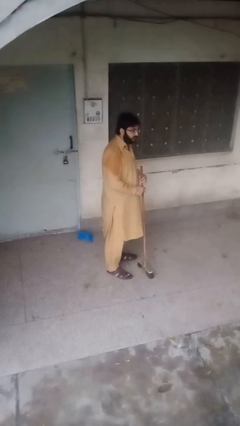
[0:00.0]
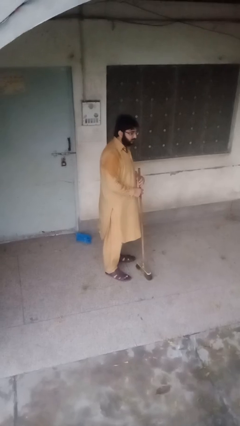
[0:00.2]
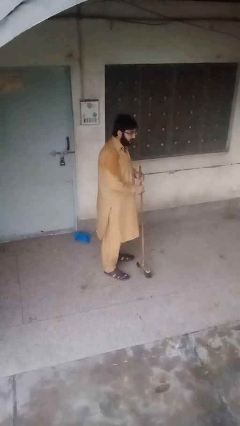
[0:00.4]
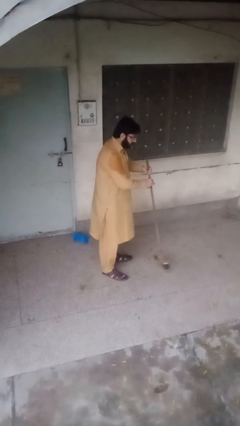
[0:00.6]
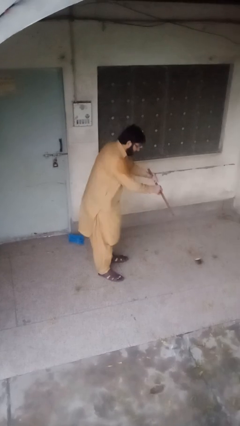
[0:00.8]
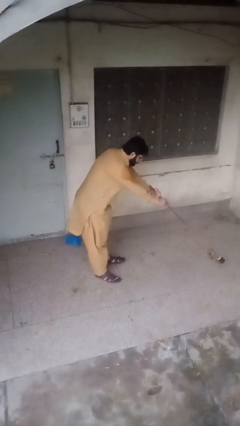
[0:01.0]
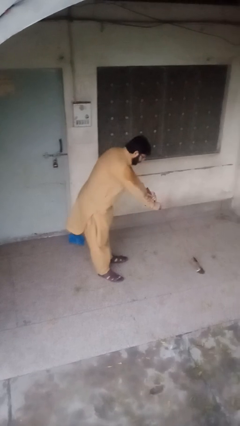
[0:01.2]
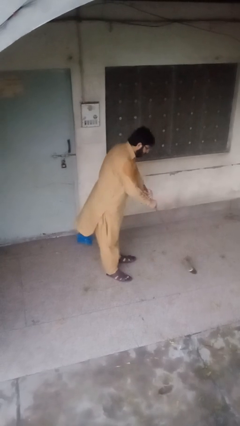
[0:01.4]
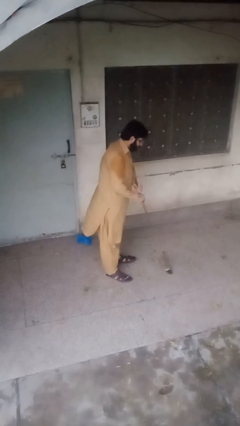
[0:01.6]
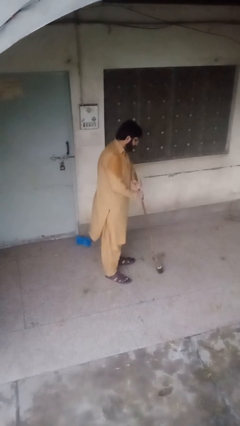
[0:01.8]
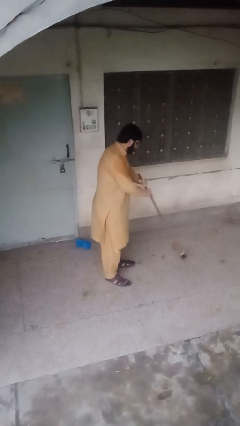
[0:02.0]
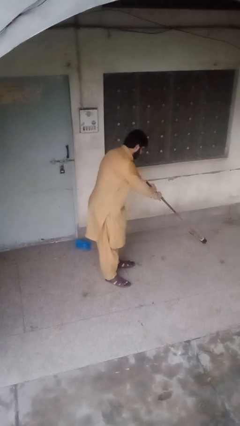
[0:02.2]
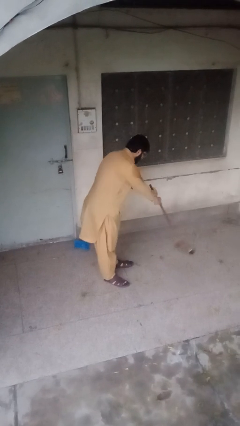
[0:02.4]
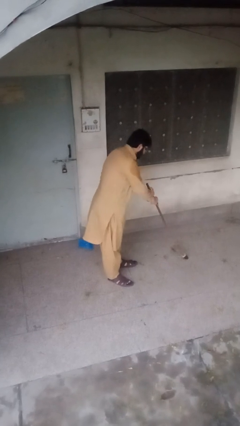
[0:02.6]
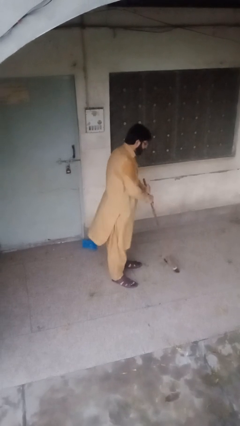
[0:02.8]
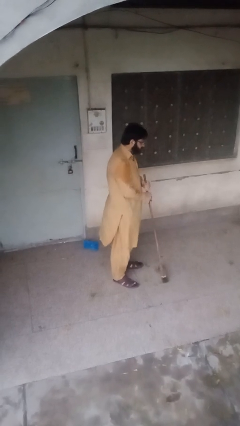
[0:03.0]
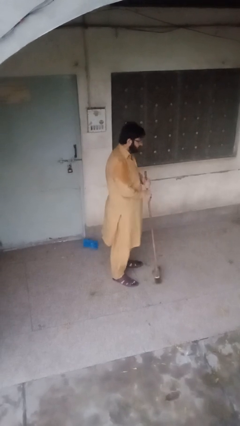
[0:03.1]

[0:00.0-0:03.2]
person sweeps floor

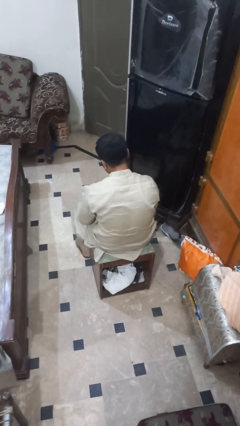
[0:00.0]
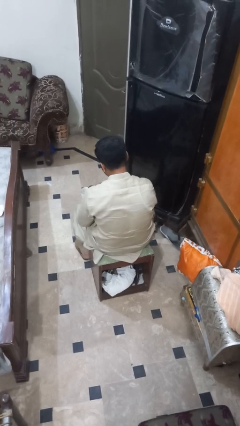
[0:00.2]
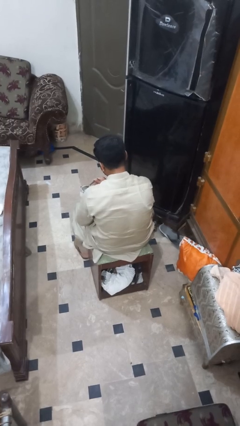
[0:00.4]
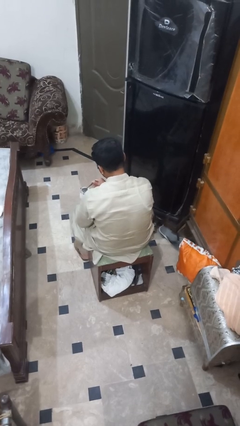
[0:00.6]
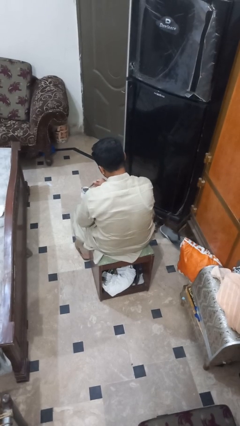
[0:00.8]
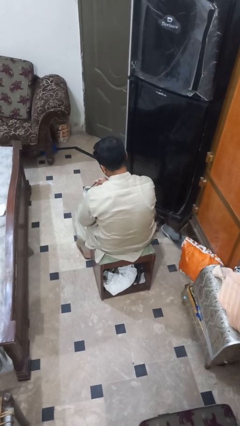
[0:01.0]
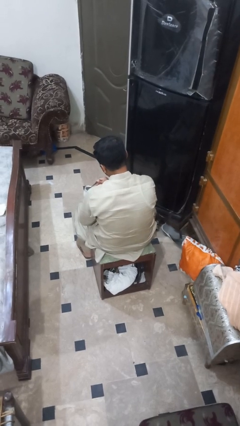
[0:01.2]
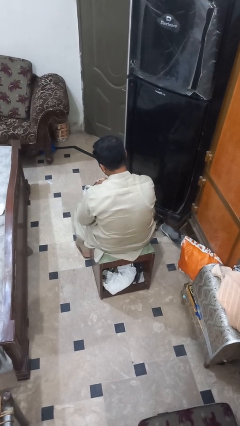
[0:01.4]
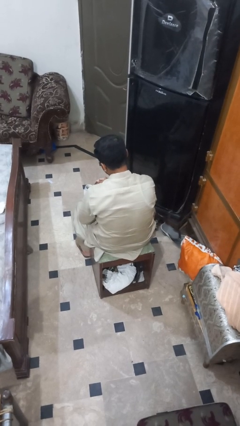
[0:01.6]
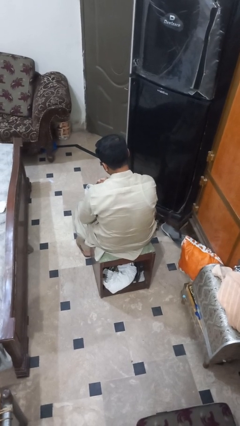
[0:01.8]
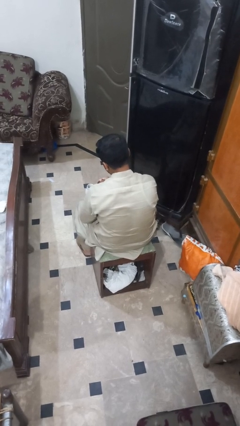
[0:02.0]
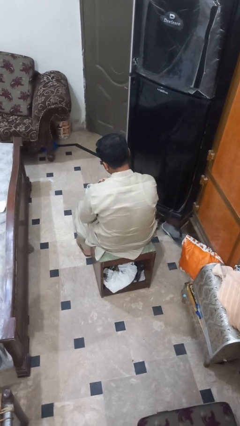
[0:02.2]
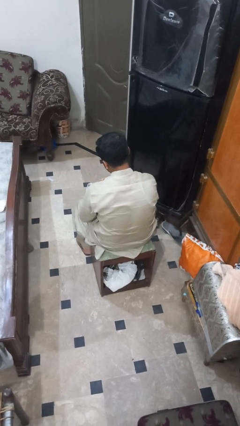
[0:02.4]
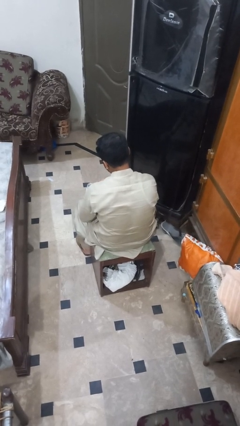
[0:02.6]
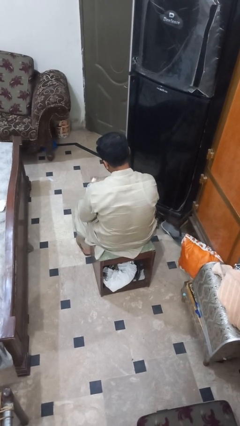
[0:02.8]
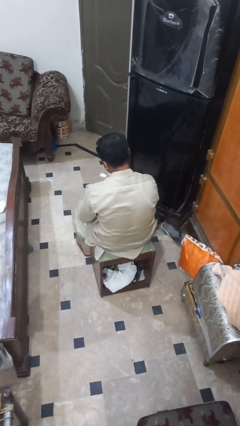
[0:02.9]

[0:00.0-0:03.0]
person stirs mug

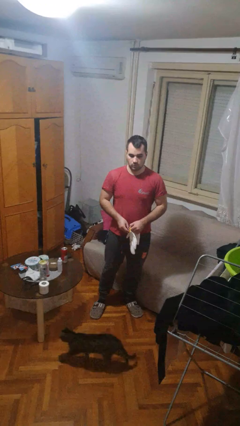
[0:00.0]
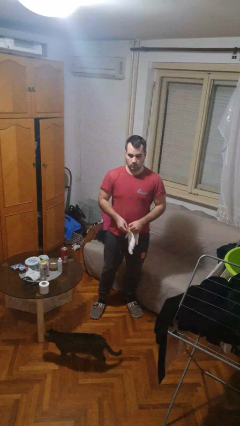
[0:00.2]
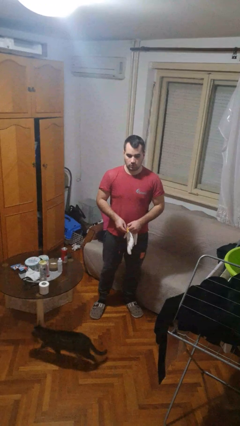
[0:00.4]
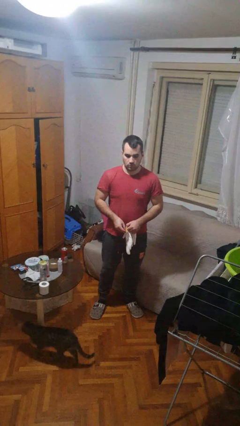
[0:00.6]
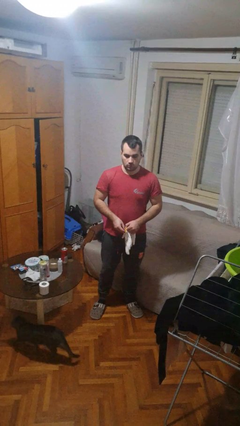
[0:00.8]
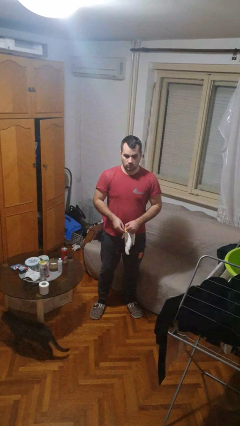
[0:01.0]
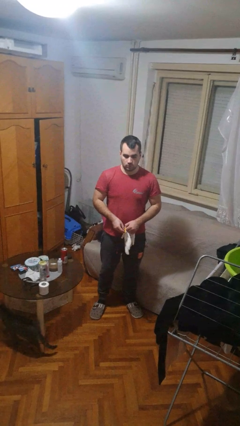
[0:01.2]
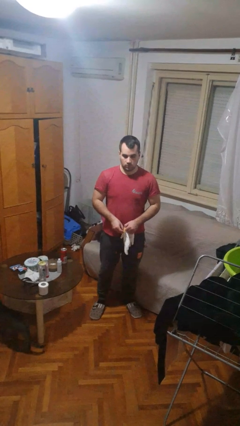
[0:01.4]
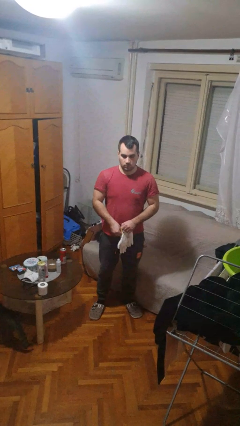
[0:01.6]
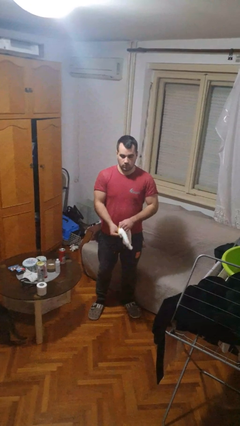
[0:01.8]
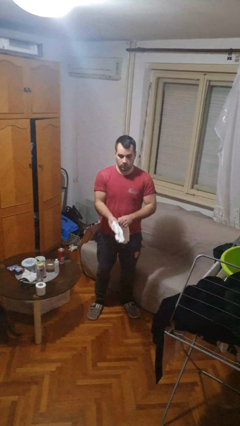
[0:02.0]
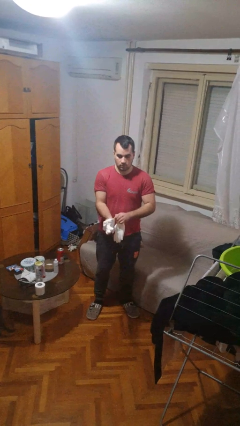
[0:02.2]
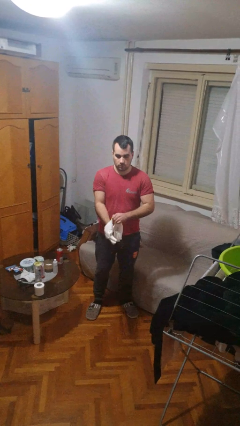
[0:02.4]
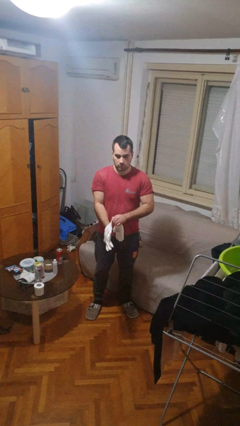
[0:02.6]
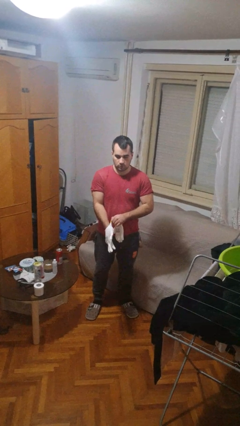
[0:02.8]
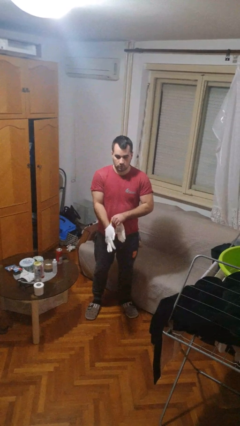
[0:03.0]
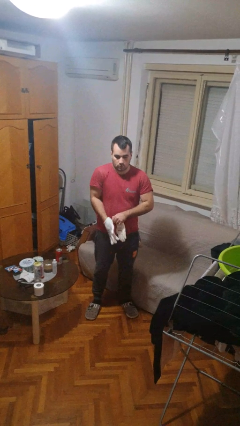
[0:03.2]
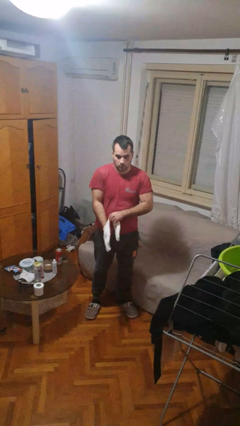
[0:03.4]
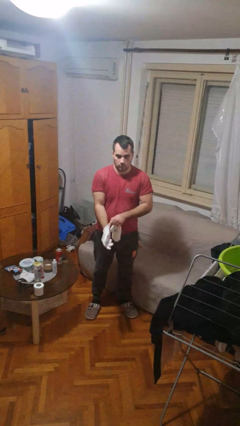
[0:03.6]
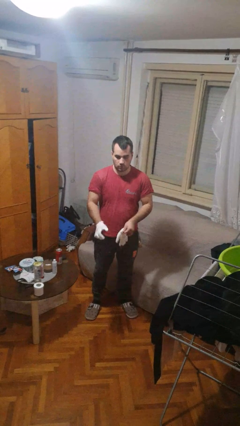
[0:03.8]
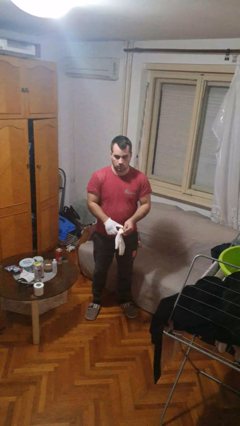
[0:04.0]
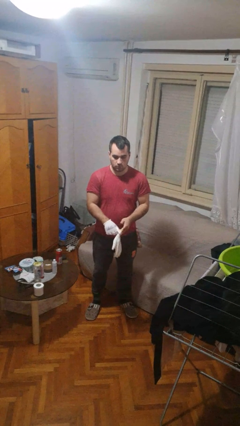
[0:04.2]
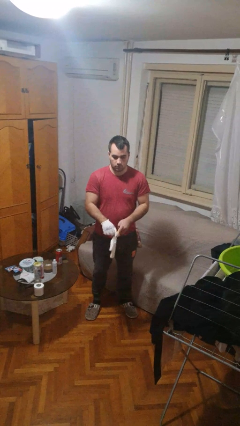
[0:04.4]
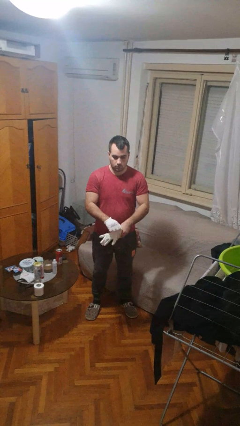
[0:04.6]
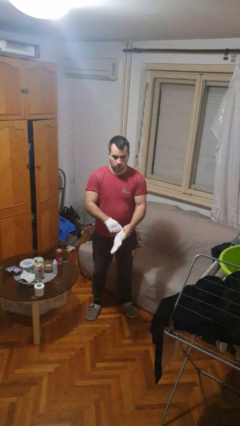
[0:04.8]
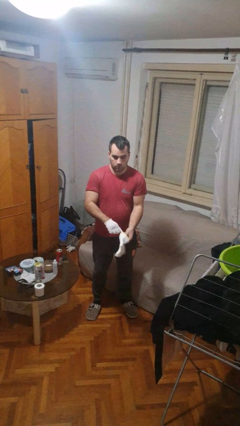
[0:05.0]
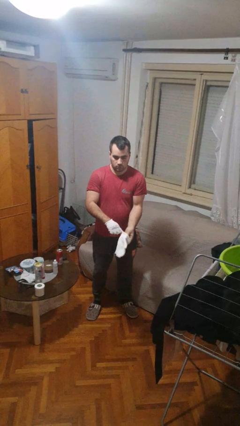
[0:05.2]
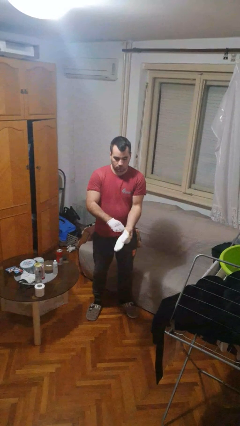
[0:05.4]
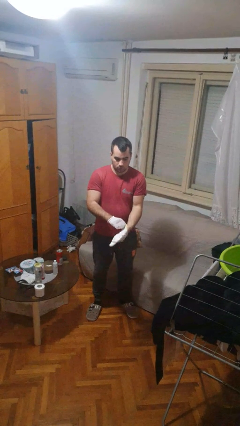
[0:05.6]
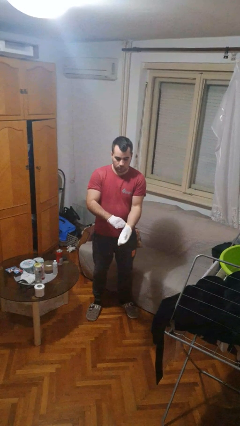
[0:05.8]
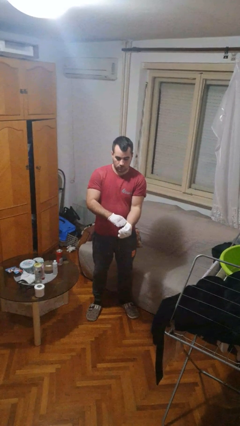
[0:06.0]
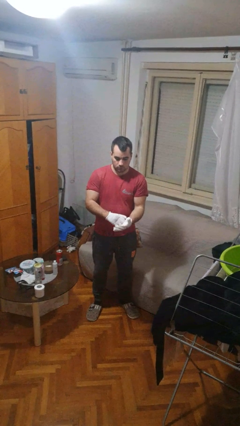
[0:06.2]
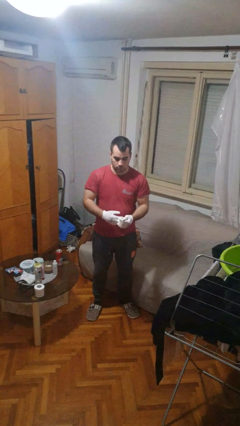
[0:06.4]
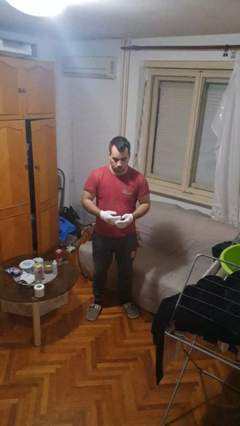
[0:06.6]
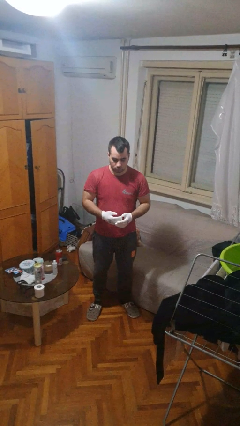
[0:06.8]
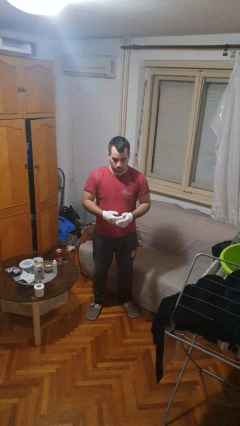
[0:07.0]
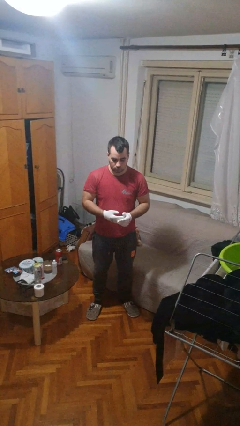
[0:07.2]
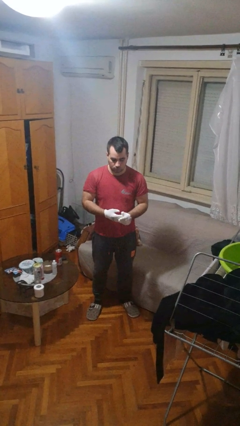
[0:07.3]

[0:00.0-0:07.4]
person puts on gloves

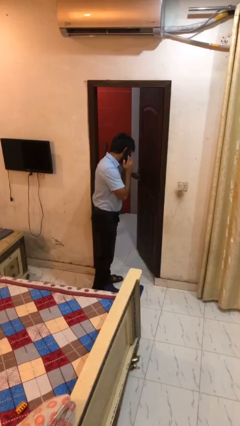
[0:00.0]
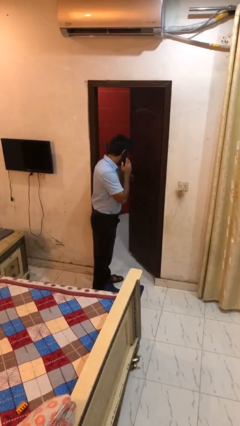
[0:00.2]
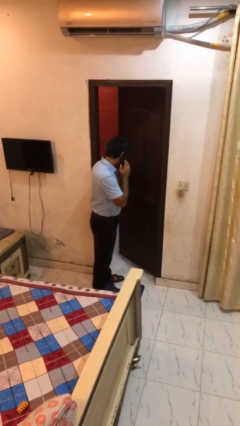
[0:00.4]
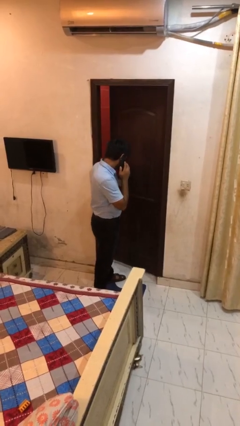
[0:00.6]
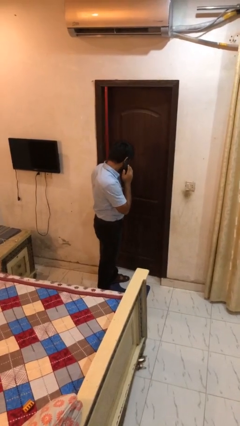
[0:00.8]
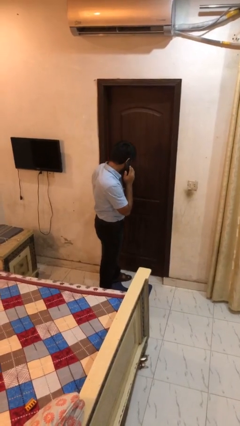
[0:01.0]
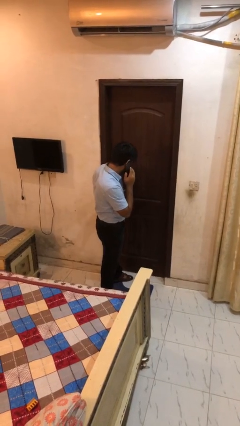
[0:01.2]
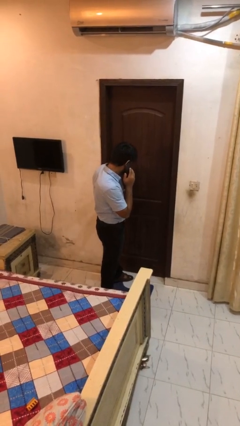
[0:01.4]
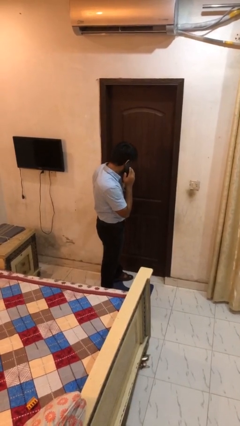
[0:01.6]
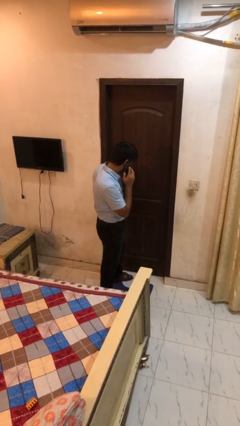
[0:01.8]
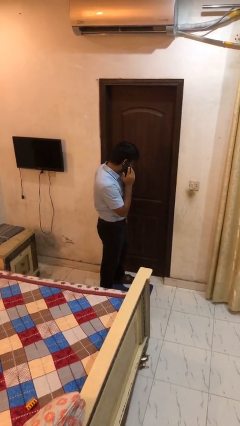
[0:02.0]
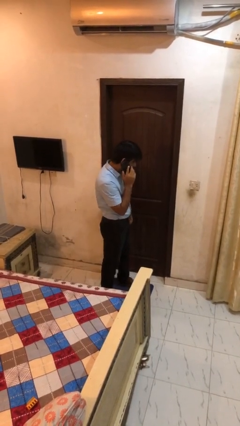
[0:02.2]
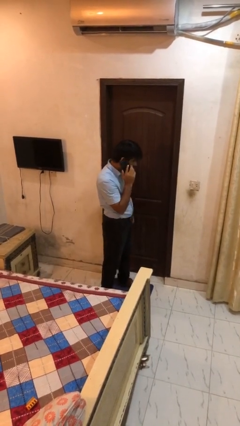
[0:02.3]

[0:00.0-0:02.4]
person closes facility door

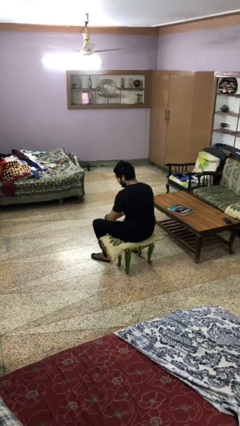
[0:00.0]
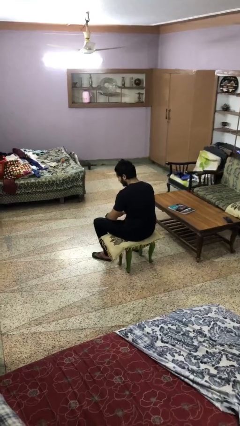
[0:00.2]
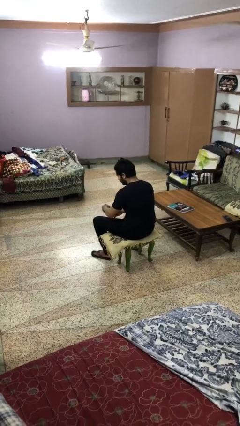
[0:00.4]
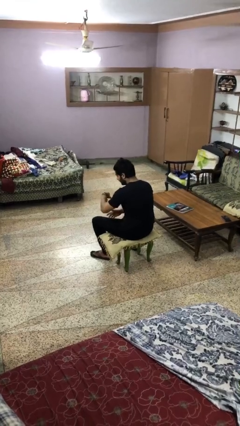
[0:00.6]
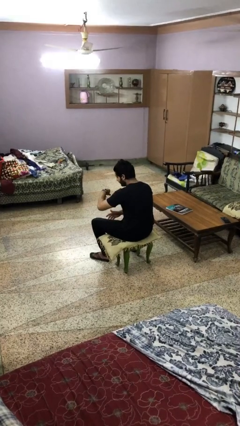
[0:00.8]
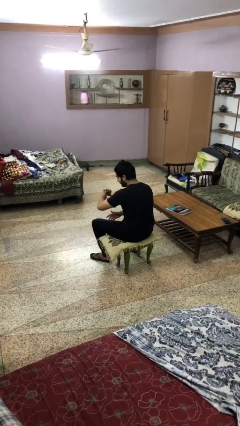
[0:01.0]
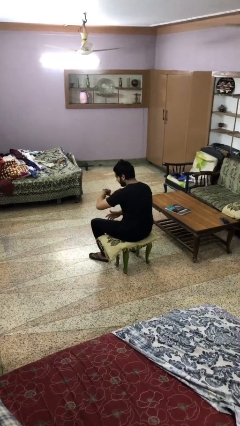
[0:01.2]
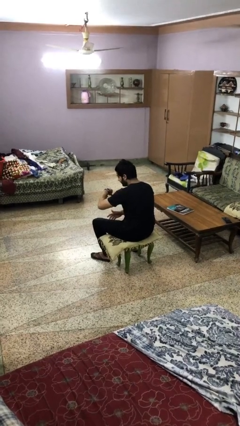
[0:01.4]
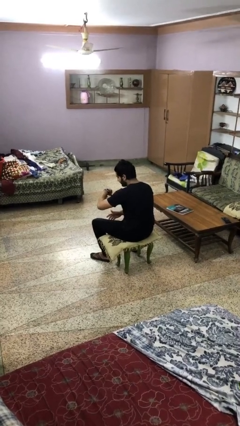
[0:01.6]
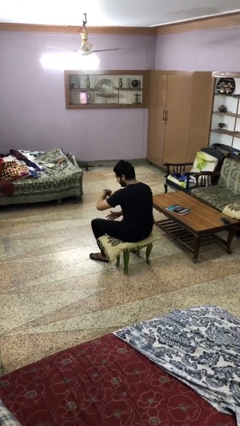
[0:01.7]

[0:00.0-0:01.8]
person looks at wristwatch

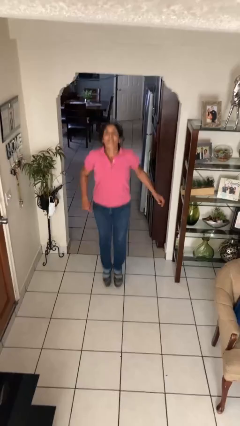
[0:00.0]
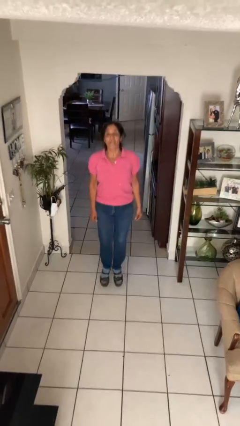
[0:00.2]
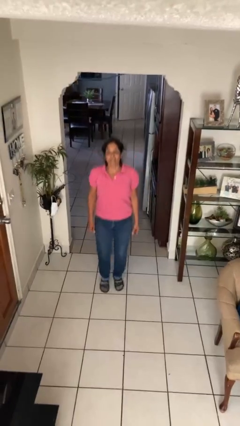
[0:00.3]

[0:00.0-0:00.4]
person jumps
